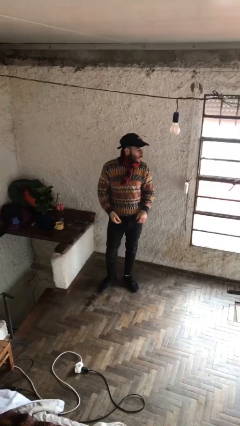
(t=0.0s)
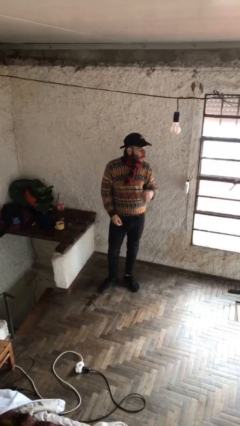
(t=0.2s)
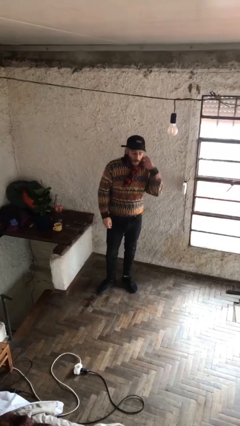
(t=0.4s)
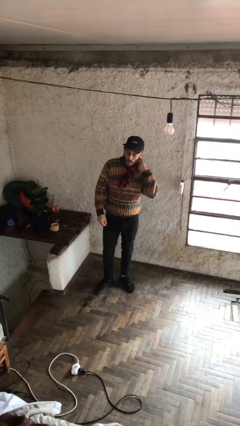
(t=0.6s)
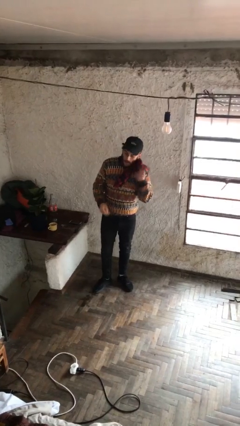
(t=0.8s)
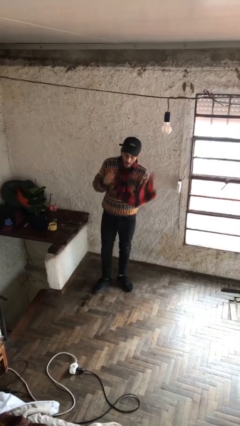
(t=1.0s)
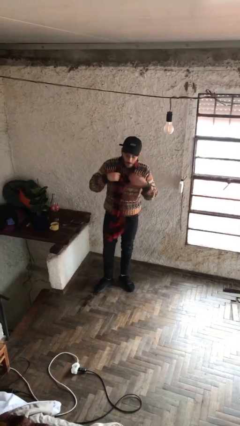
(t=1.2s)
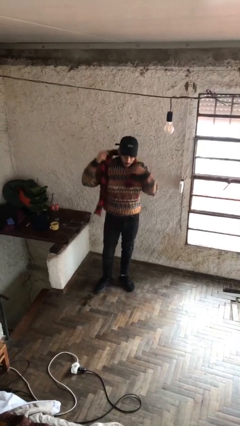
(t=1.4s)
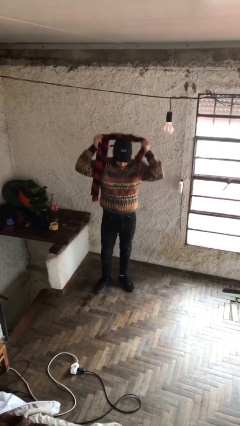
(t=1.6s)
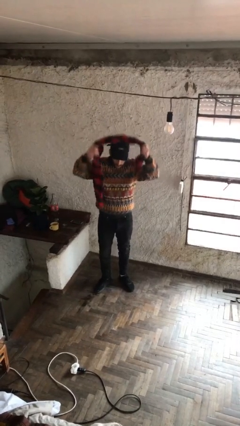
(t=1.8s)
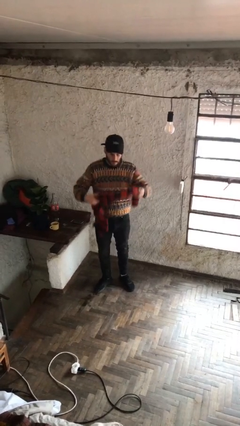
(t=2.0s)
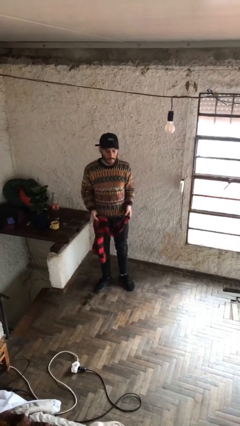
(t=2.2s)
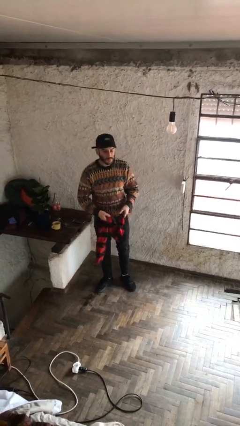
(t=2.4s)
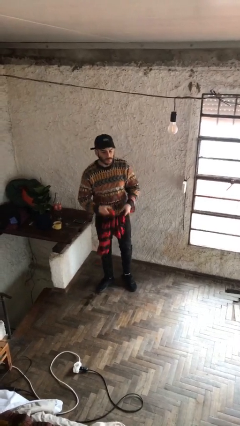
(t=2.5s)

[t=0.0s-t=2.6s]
person takes off scarf

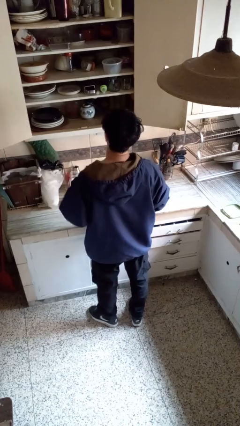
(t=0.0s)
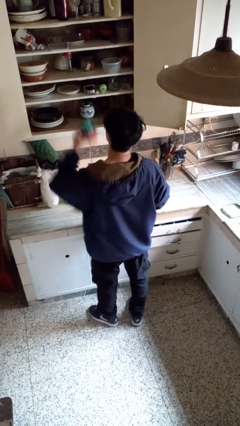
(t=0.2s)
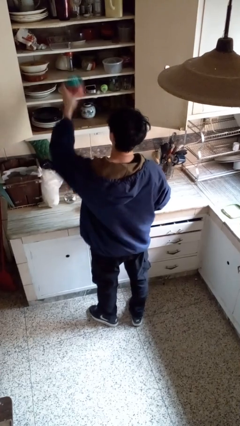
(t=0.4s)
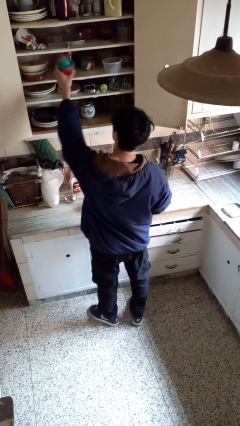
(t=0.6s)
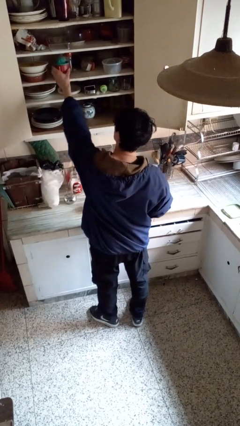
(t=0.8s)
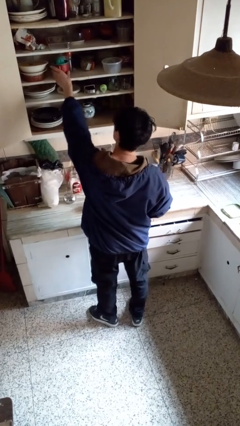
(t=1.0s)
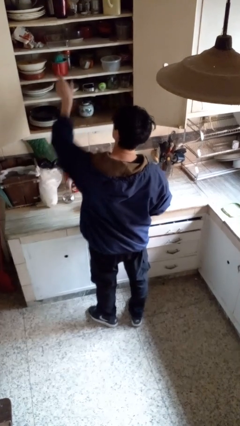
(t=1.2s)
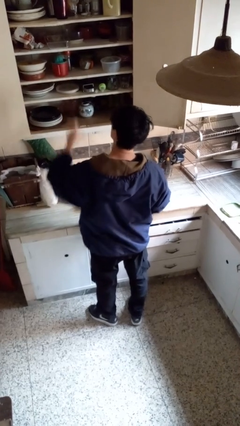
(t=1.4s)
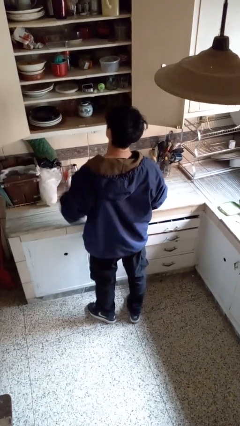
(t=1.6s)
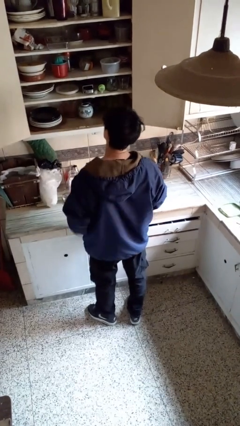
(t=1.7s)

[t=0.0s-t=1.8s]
person puts object in cabinet

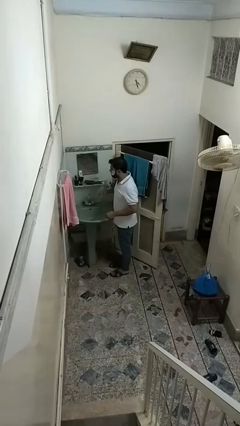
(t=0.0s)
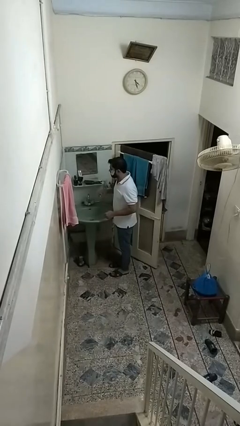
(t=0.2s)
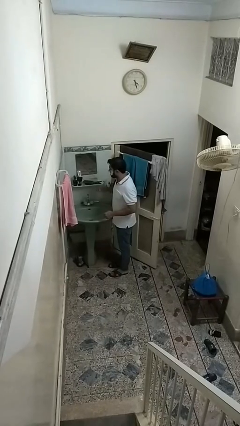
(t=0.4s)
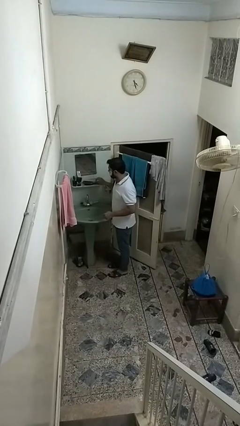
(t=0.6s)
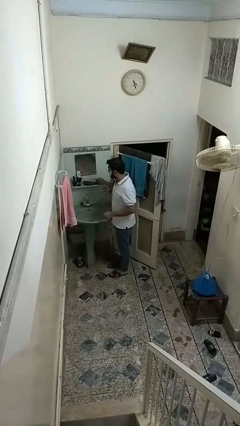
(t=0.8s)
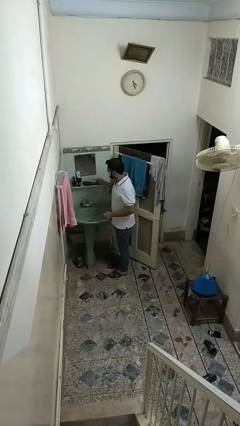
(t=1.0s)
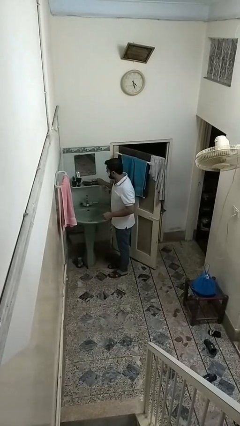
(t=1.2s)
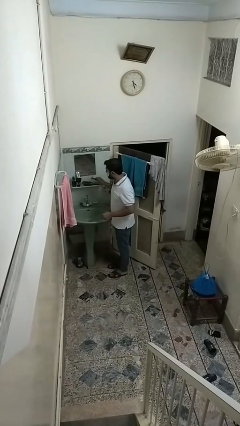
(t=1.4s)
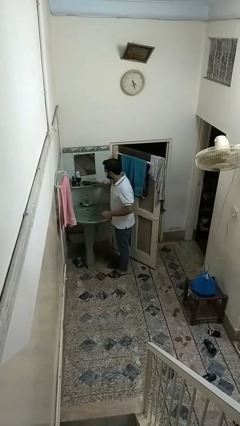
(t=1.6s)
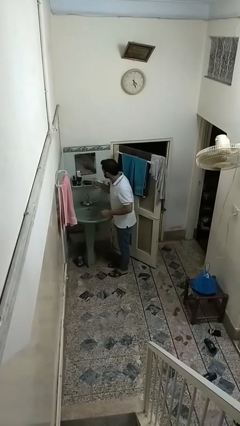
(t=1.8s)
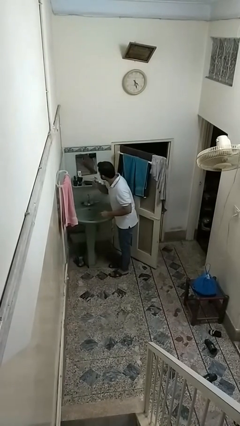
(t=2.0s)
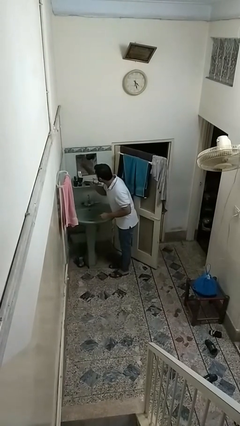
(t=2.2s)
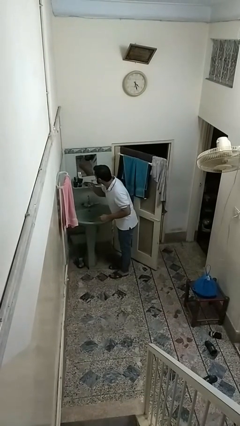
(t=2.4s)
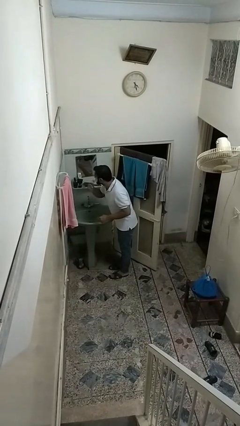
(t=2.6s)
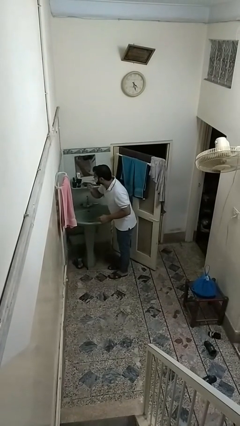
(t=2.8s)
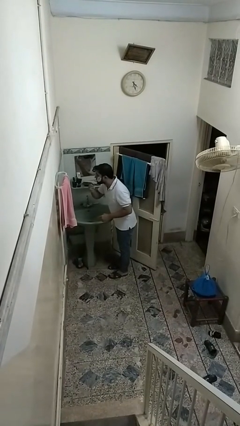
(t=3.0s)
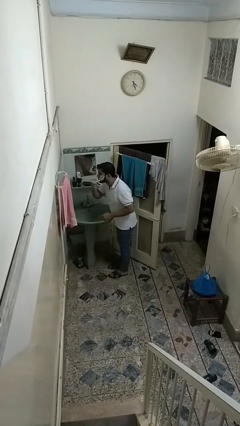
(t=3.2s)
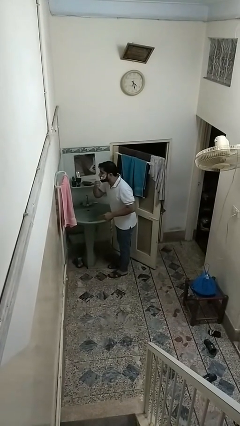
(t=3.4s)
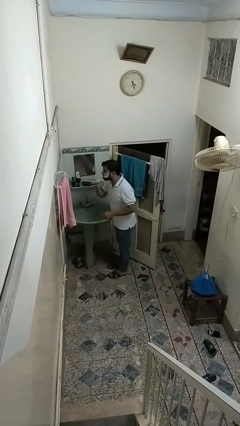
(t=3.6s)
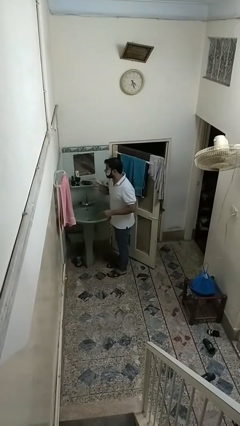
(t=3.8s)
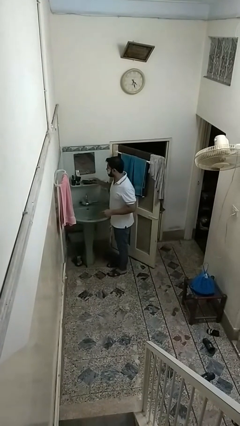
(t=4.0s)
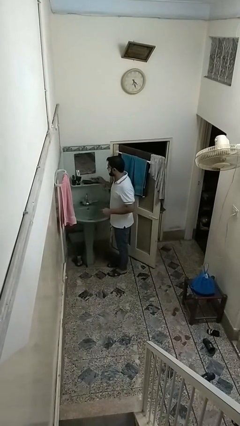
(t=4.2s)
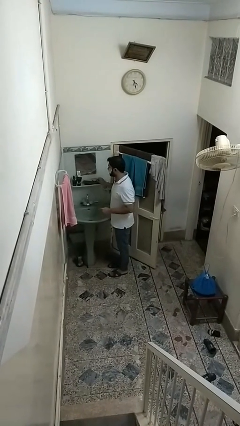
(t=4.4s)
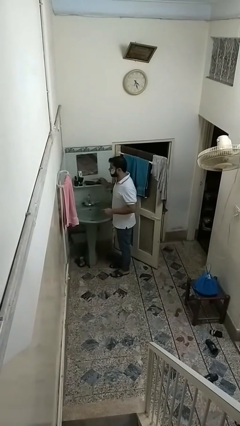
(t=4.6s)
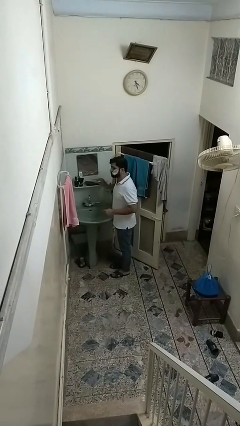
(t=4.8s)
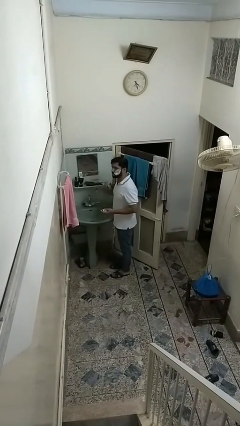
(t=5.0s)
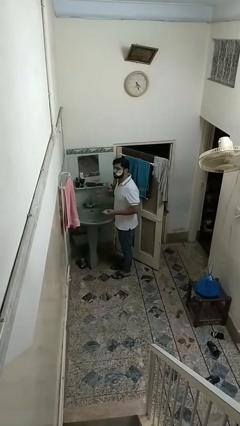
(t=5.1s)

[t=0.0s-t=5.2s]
person shaves face

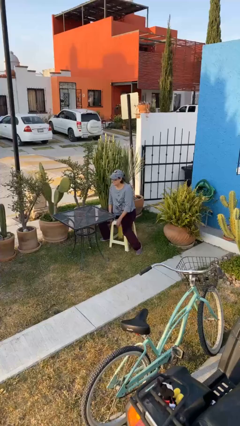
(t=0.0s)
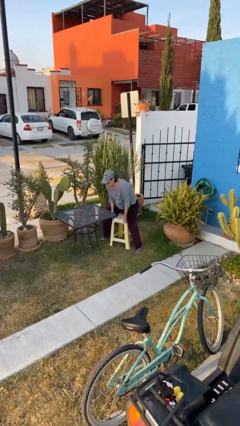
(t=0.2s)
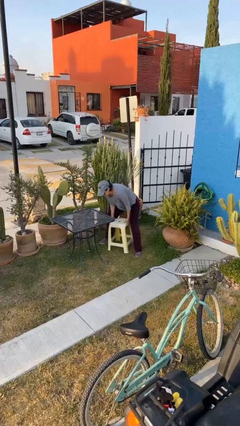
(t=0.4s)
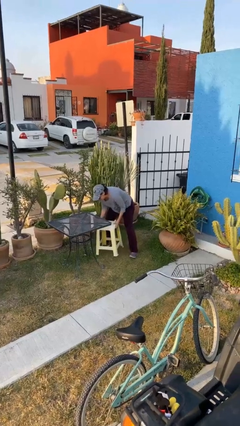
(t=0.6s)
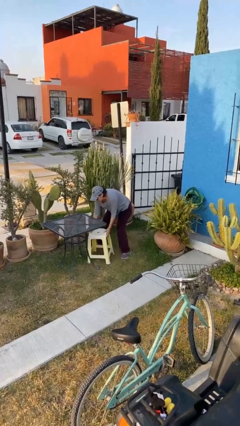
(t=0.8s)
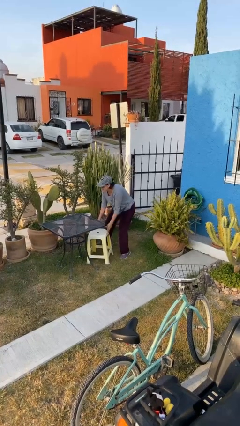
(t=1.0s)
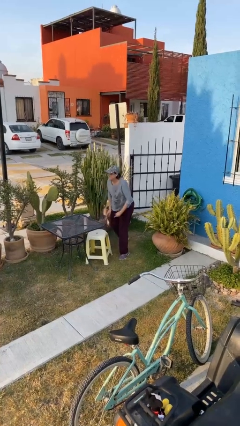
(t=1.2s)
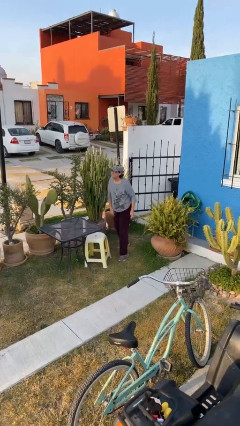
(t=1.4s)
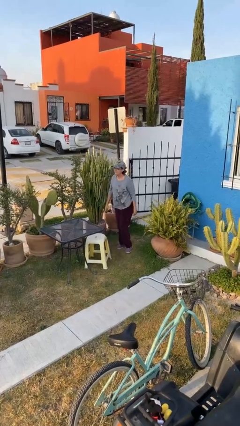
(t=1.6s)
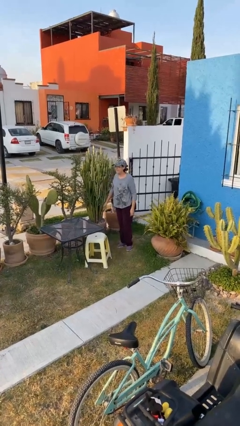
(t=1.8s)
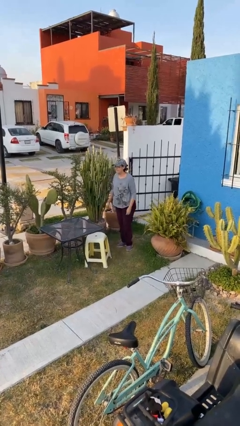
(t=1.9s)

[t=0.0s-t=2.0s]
person stands up

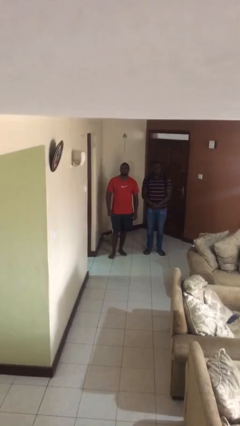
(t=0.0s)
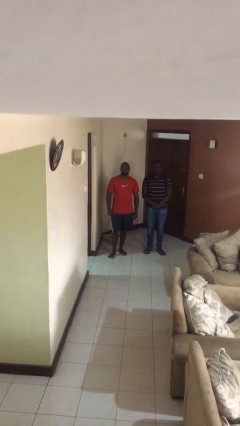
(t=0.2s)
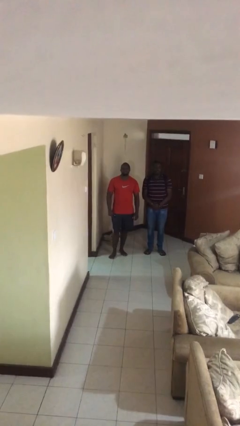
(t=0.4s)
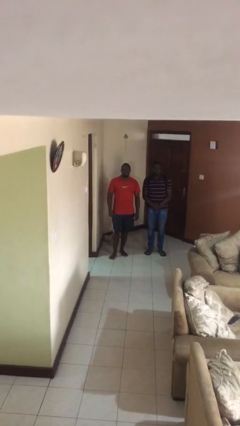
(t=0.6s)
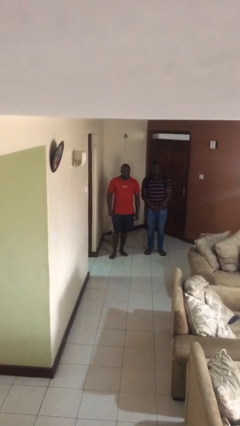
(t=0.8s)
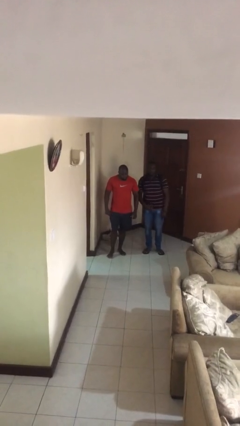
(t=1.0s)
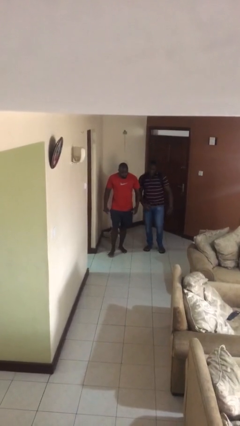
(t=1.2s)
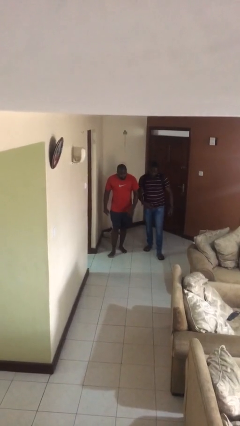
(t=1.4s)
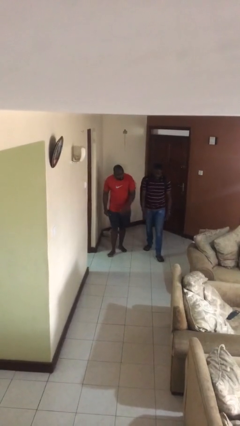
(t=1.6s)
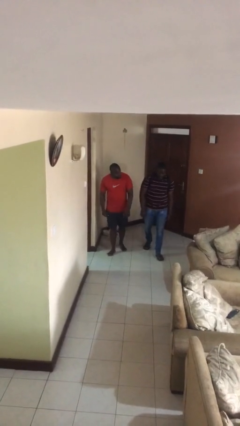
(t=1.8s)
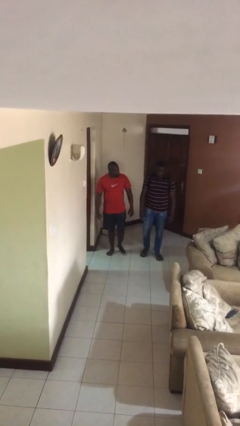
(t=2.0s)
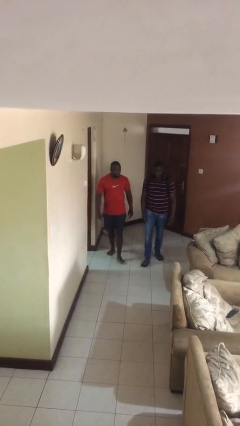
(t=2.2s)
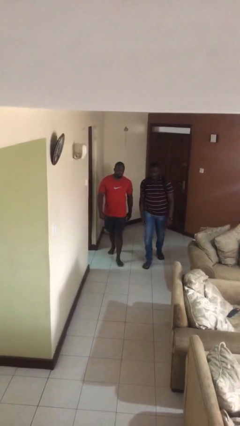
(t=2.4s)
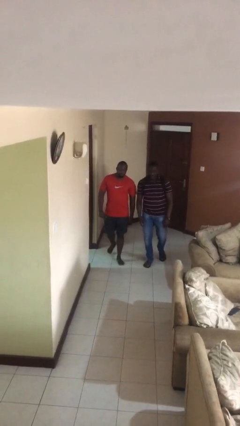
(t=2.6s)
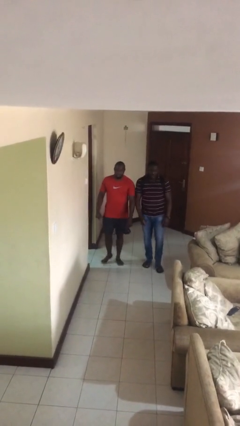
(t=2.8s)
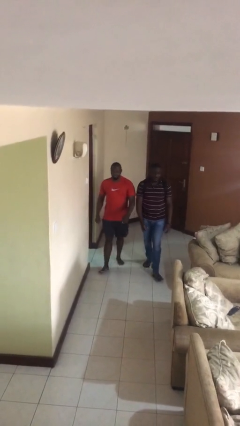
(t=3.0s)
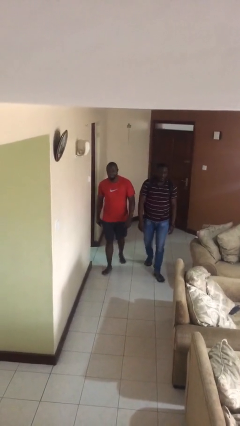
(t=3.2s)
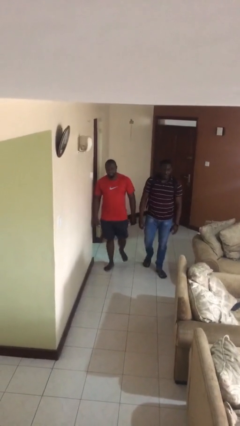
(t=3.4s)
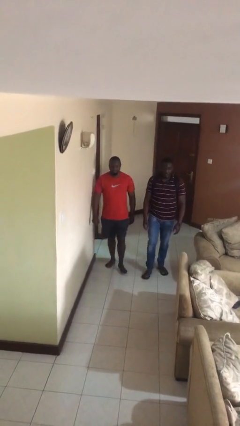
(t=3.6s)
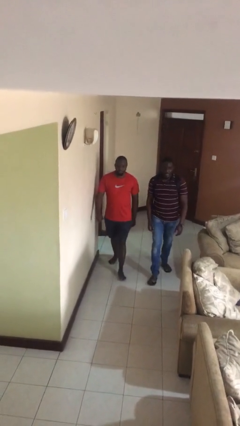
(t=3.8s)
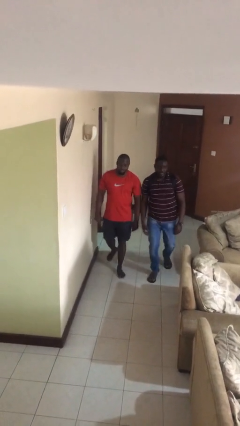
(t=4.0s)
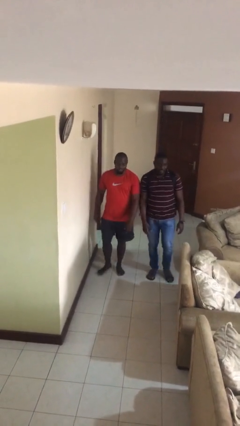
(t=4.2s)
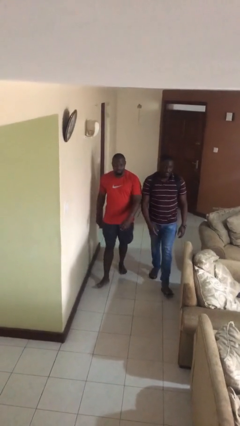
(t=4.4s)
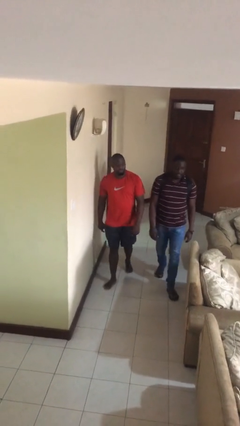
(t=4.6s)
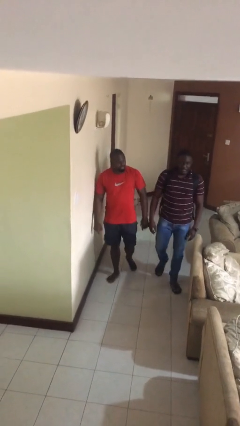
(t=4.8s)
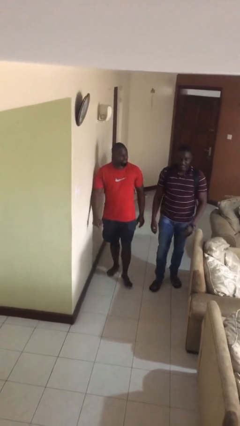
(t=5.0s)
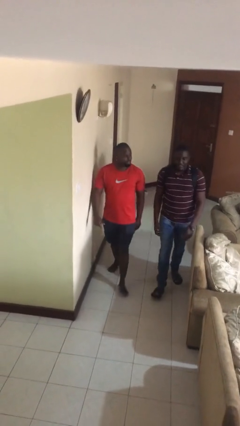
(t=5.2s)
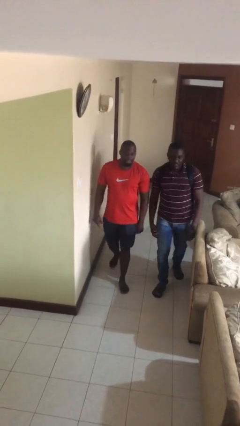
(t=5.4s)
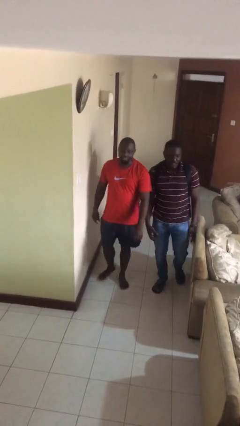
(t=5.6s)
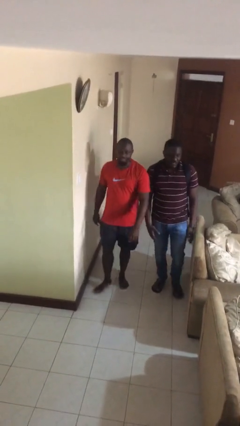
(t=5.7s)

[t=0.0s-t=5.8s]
person talks to person
